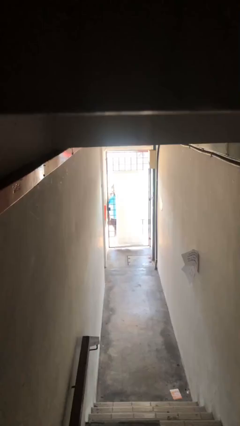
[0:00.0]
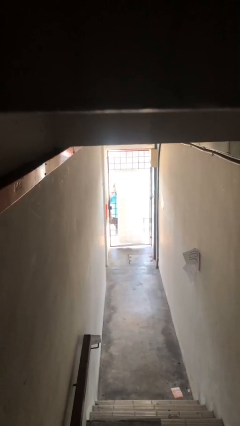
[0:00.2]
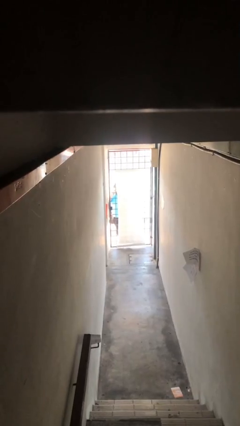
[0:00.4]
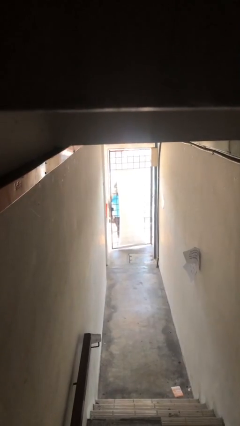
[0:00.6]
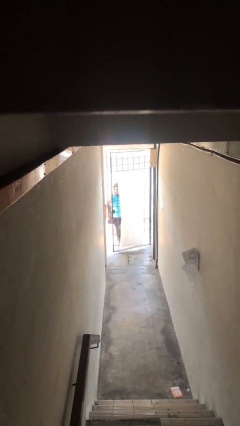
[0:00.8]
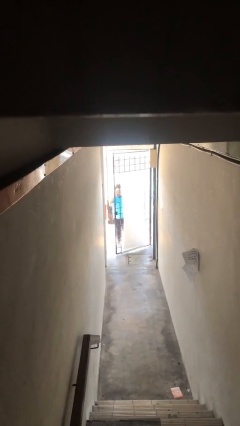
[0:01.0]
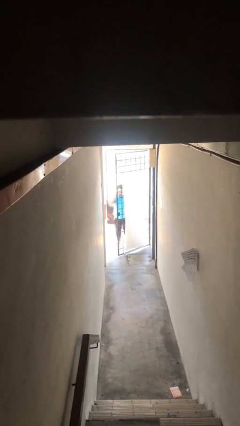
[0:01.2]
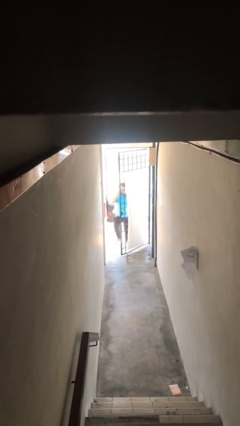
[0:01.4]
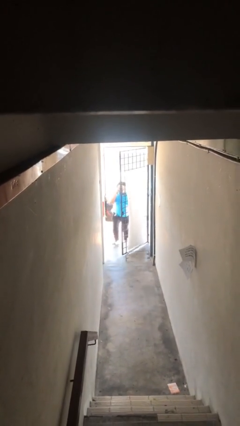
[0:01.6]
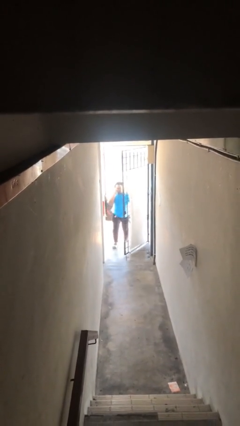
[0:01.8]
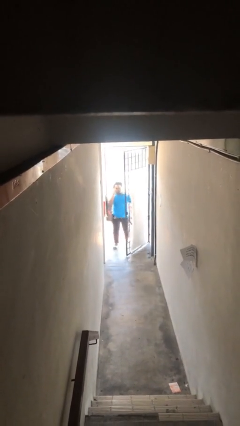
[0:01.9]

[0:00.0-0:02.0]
person opens facility door

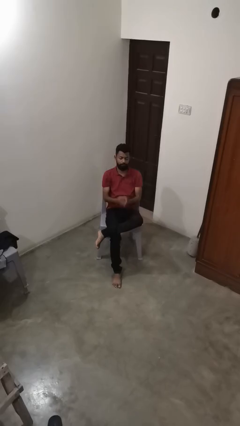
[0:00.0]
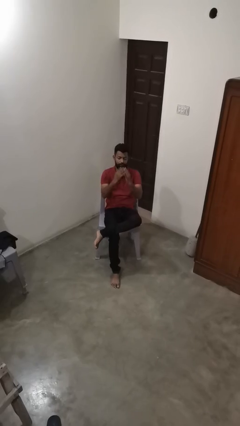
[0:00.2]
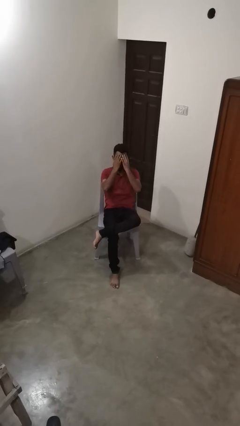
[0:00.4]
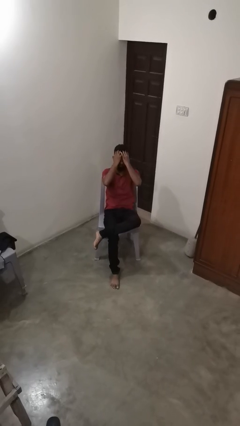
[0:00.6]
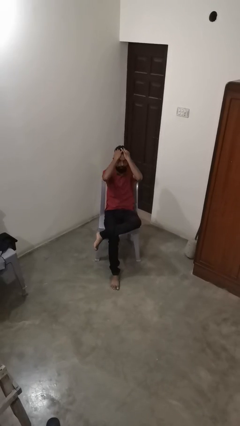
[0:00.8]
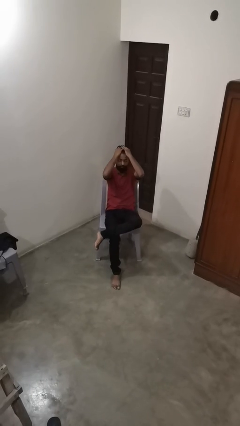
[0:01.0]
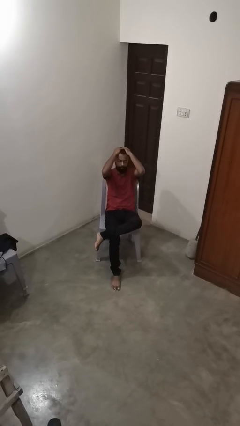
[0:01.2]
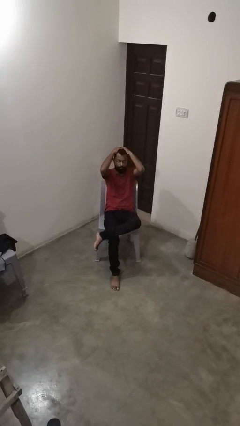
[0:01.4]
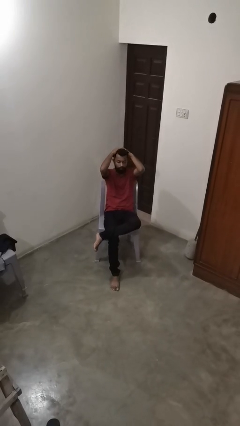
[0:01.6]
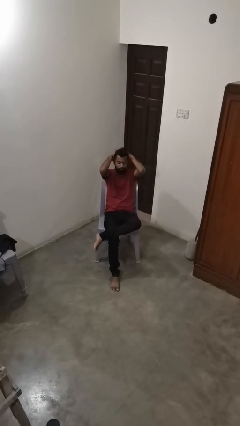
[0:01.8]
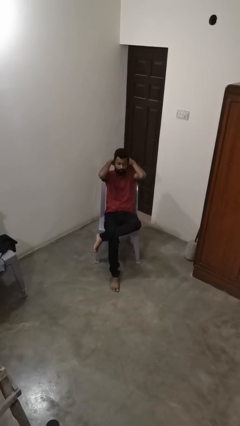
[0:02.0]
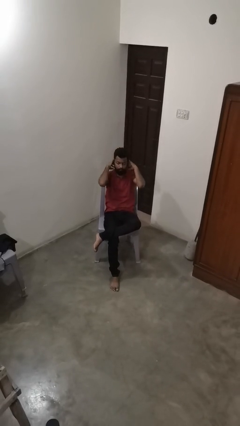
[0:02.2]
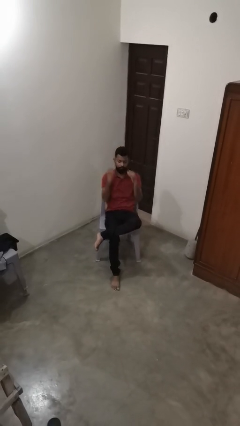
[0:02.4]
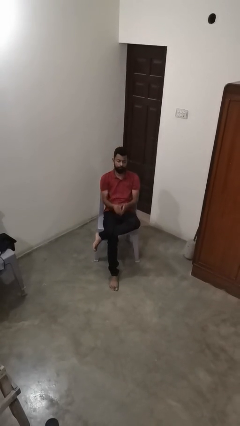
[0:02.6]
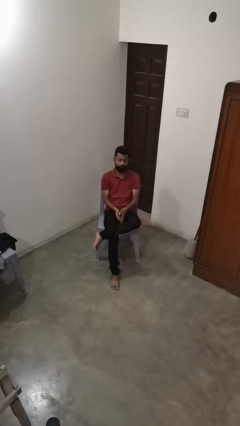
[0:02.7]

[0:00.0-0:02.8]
person strokes hair

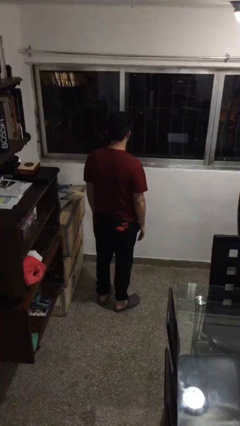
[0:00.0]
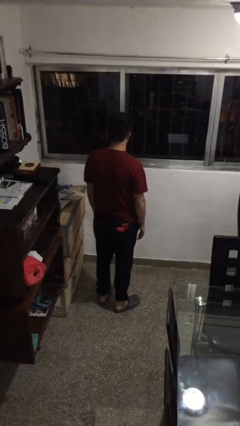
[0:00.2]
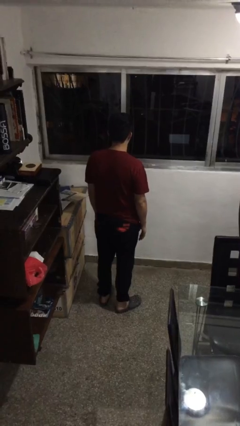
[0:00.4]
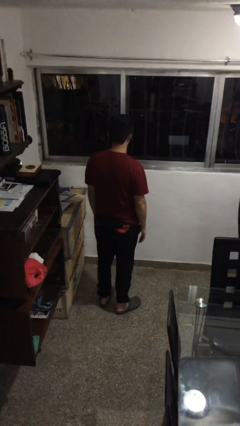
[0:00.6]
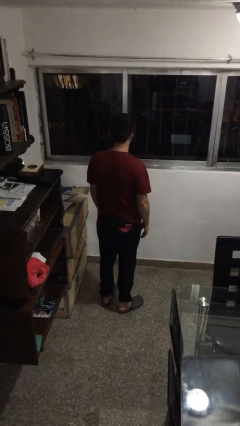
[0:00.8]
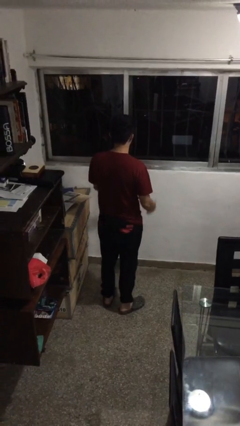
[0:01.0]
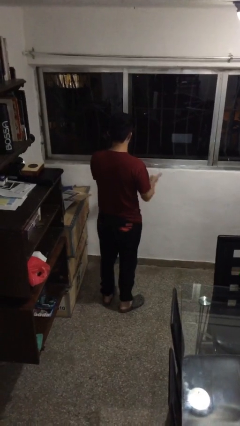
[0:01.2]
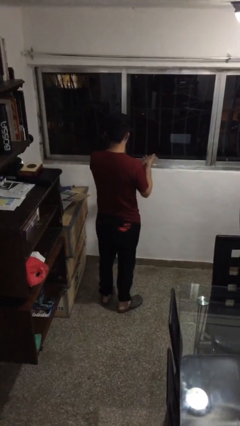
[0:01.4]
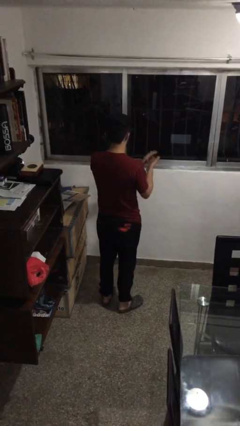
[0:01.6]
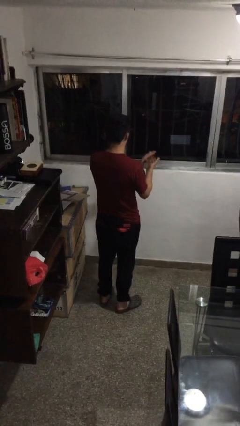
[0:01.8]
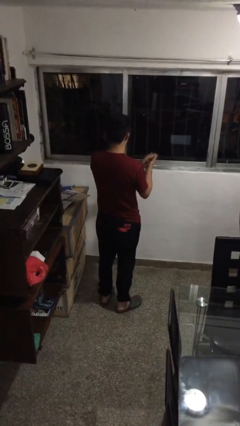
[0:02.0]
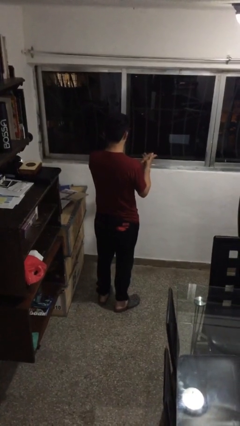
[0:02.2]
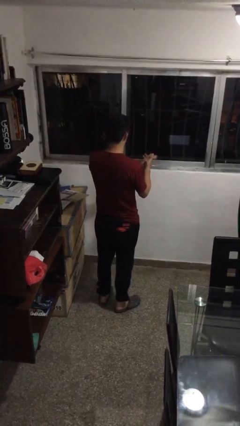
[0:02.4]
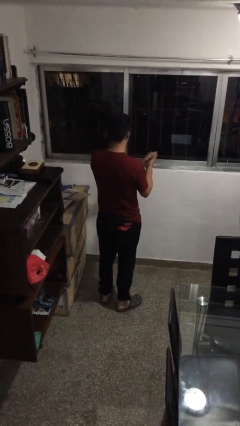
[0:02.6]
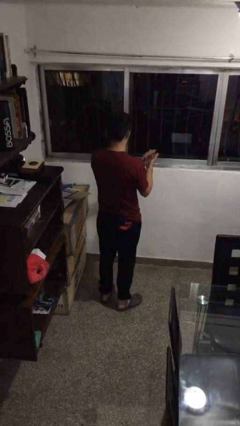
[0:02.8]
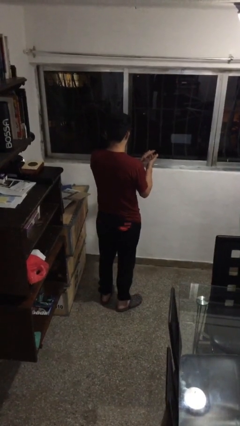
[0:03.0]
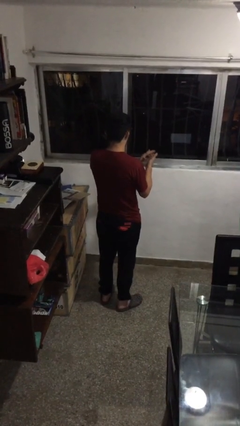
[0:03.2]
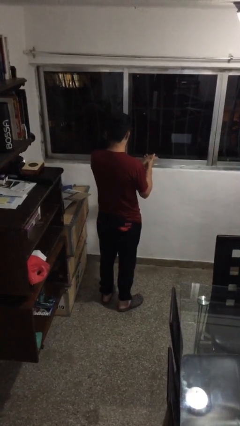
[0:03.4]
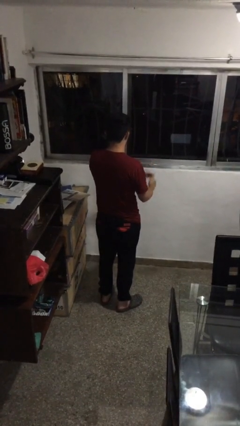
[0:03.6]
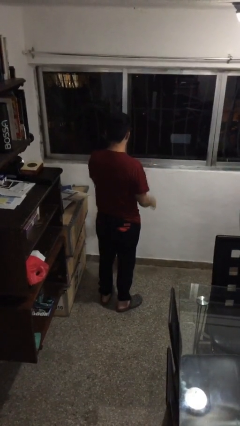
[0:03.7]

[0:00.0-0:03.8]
person claps hands

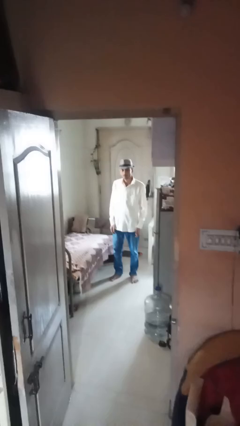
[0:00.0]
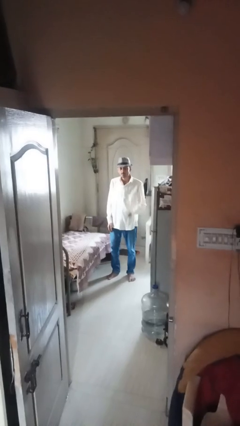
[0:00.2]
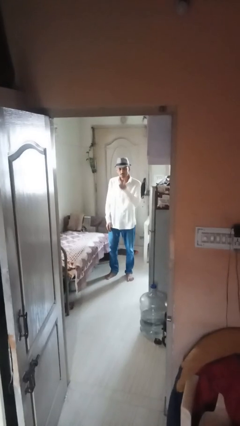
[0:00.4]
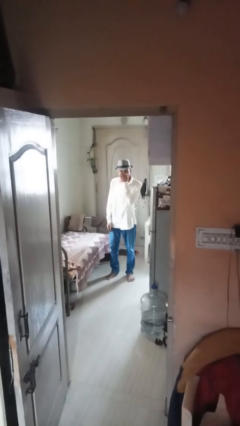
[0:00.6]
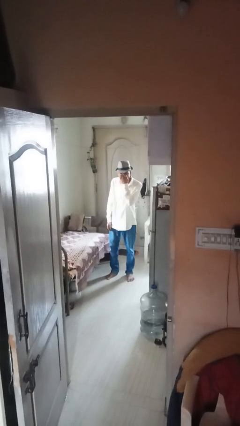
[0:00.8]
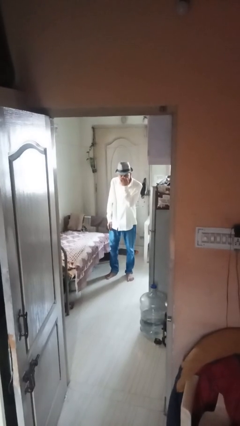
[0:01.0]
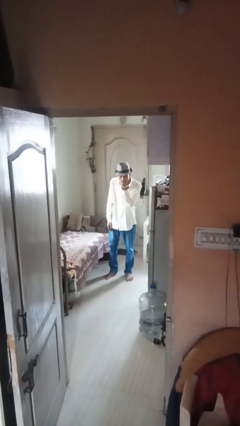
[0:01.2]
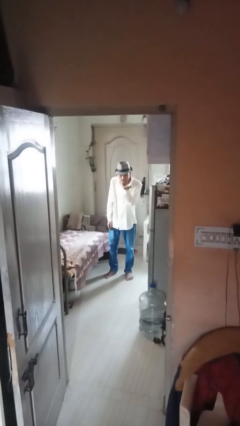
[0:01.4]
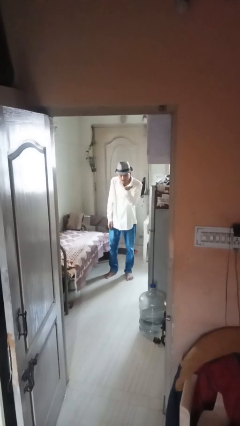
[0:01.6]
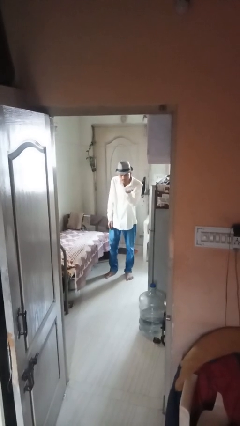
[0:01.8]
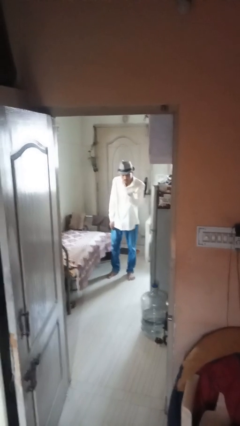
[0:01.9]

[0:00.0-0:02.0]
person gestures blow kiss

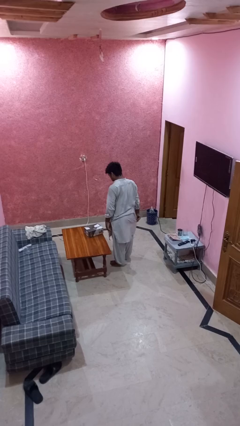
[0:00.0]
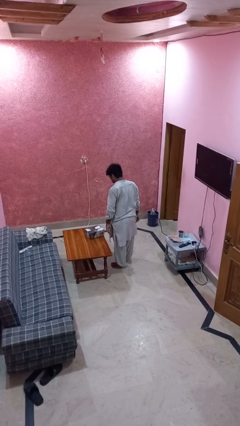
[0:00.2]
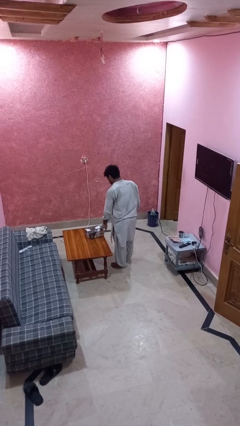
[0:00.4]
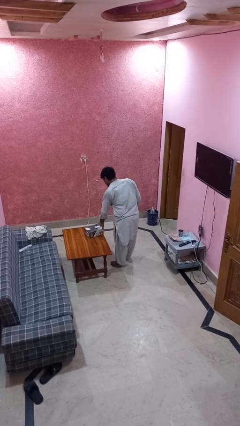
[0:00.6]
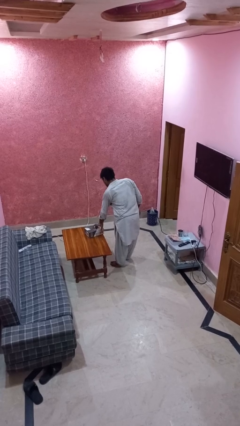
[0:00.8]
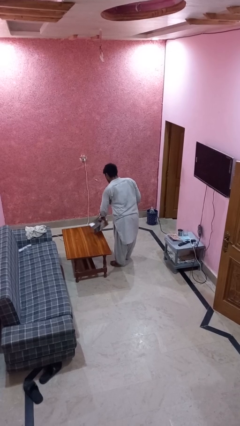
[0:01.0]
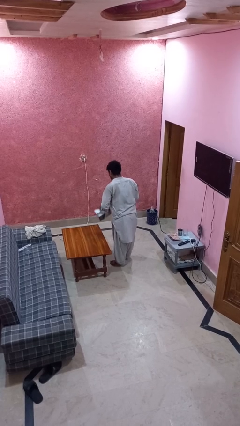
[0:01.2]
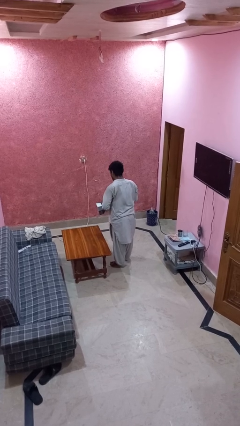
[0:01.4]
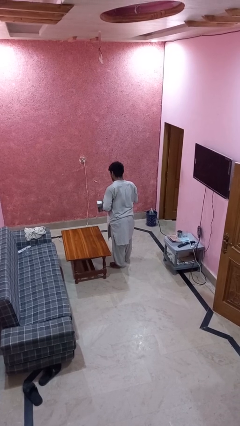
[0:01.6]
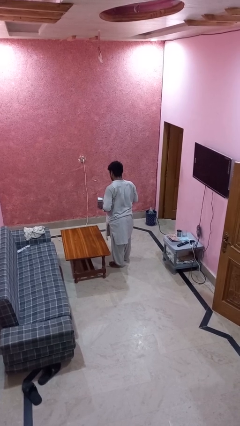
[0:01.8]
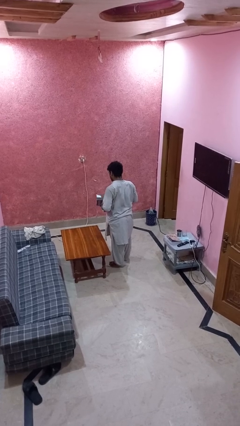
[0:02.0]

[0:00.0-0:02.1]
person picks up object from table

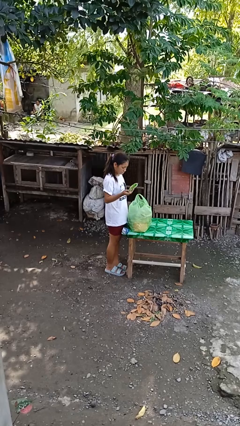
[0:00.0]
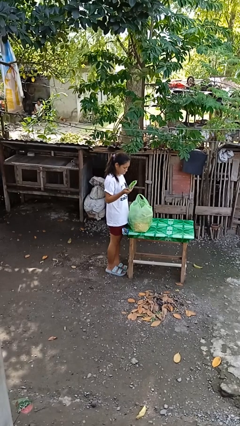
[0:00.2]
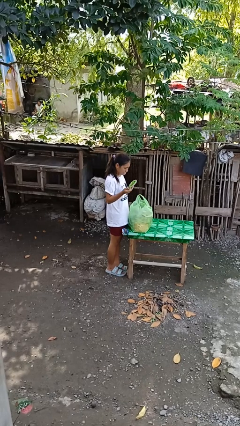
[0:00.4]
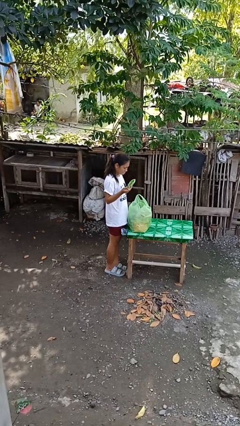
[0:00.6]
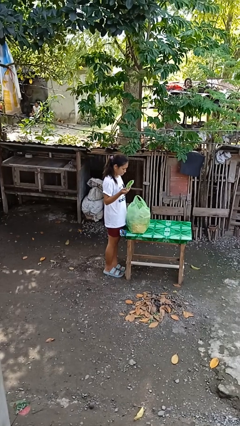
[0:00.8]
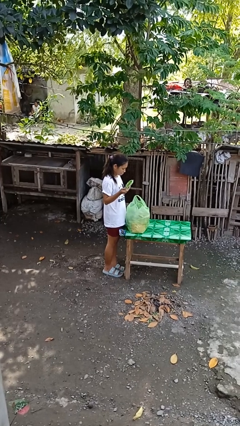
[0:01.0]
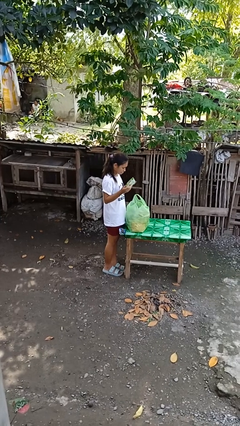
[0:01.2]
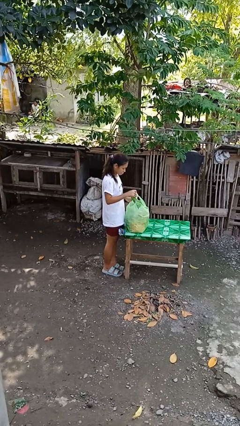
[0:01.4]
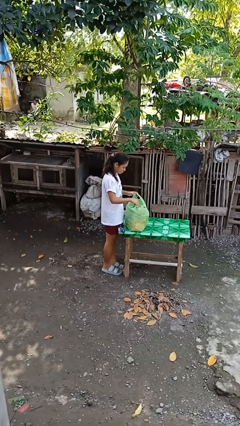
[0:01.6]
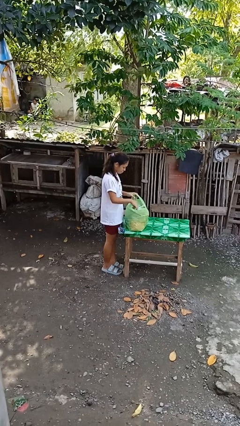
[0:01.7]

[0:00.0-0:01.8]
person hits person with pillow

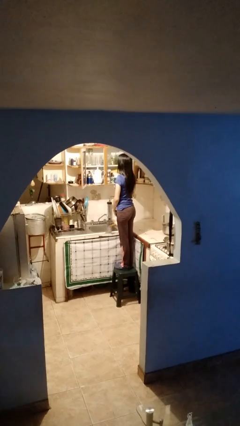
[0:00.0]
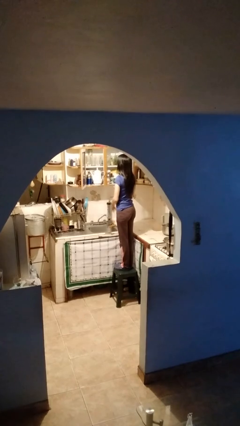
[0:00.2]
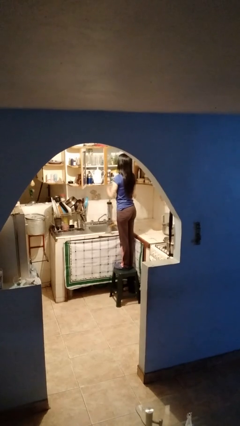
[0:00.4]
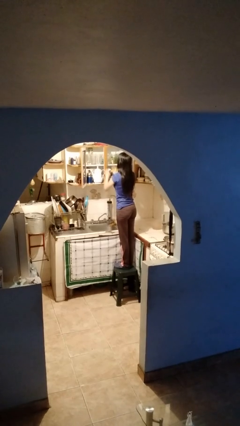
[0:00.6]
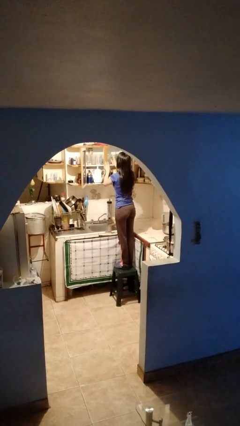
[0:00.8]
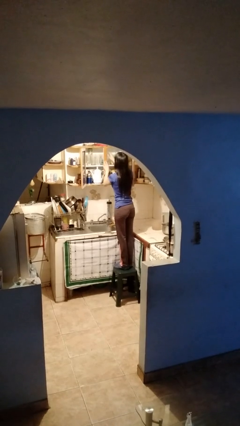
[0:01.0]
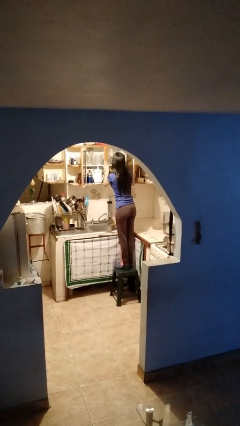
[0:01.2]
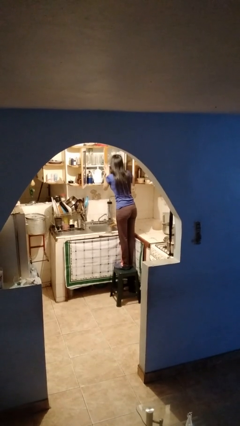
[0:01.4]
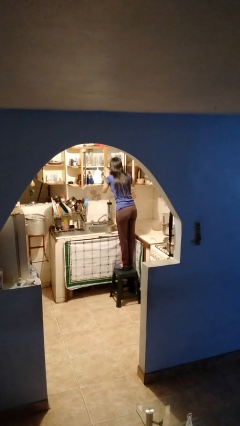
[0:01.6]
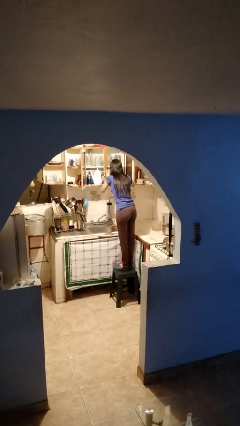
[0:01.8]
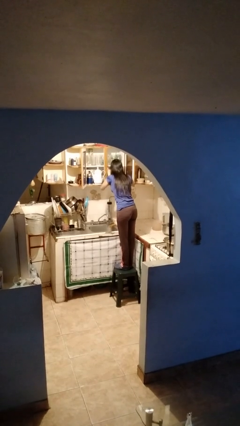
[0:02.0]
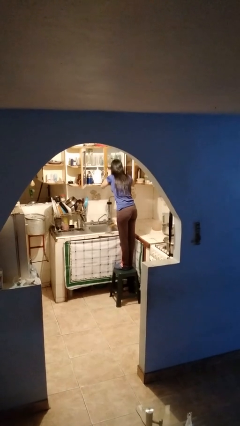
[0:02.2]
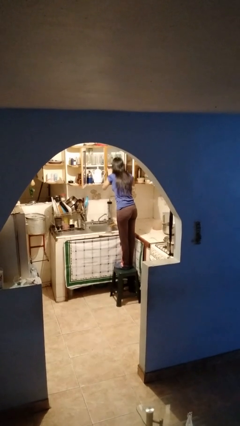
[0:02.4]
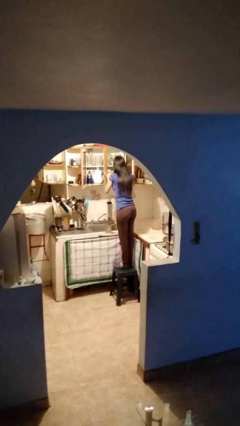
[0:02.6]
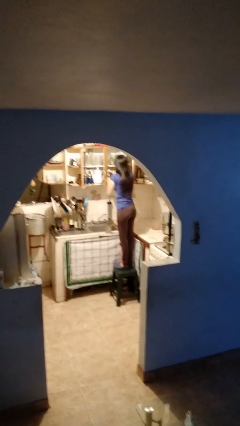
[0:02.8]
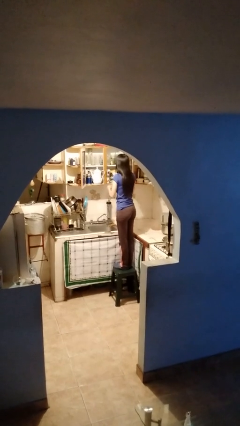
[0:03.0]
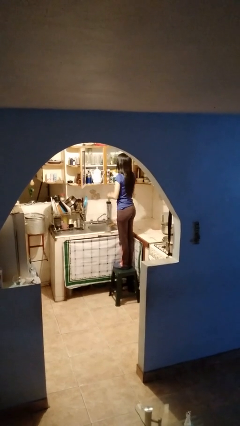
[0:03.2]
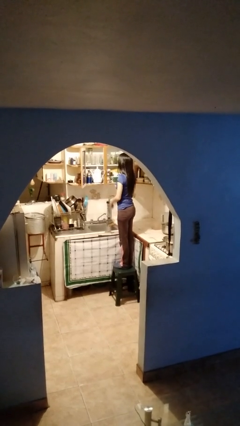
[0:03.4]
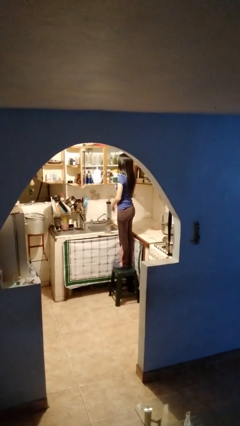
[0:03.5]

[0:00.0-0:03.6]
person searches in cabinet
